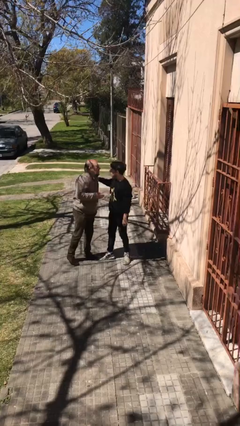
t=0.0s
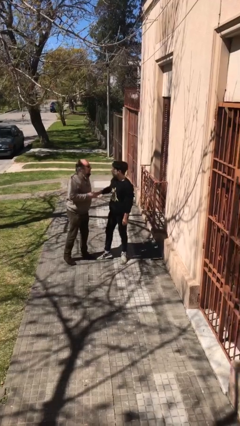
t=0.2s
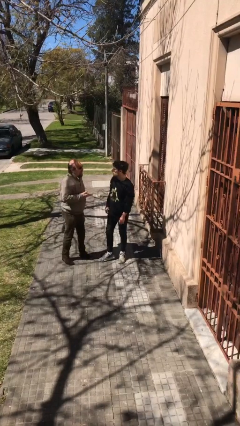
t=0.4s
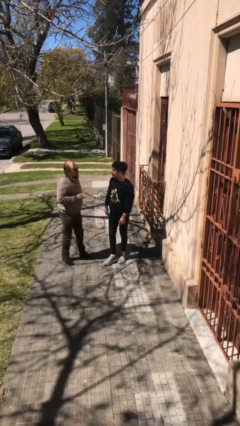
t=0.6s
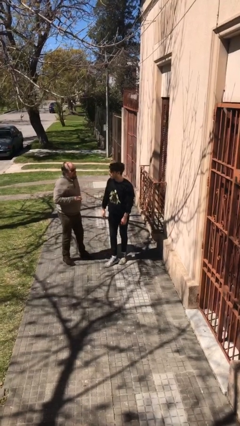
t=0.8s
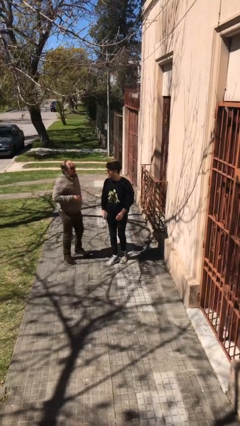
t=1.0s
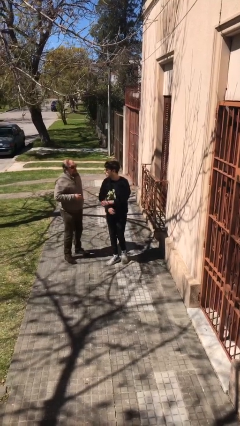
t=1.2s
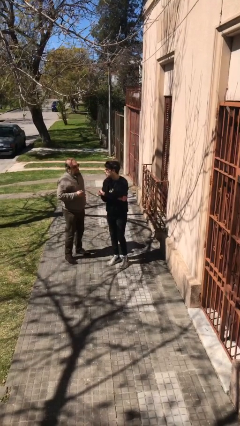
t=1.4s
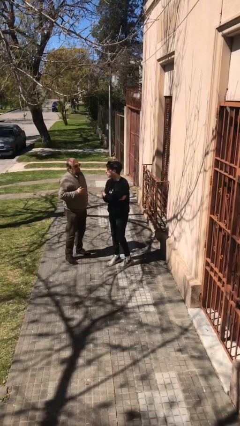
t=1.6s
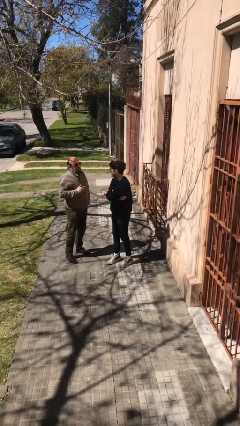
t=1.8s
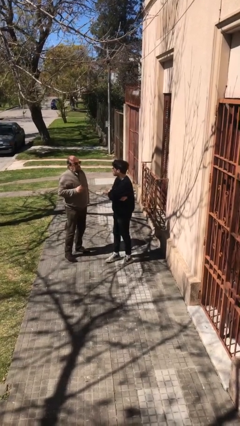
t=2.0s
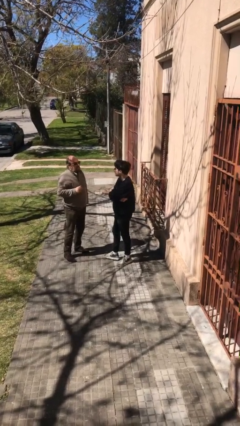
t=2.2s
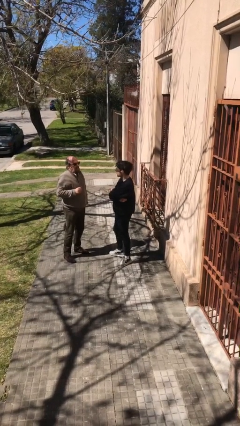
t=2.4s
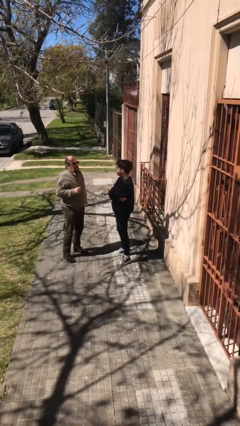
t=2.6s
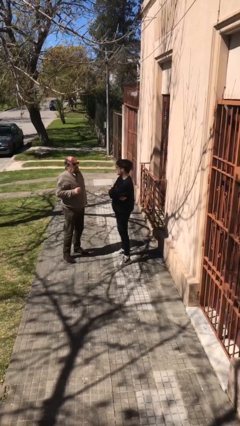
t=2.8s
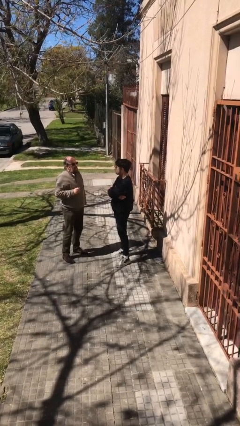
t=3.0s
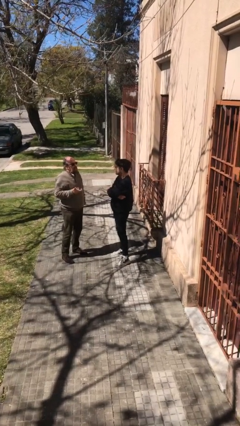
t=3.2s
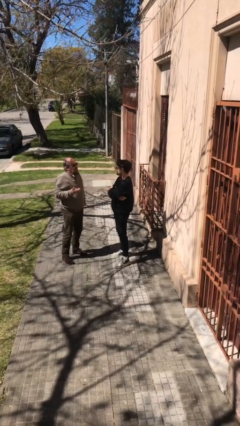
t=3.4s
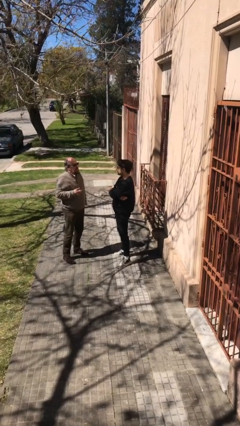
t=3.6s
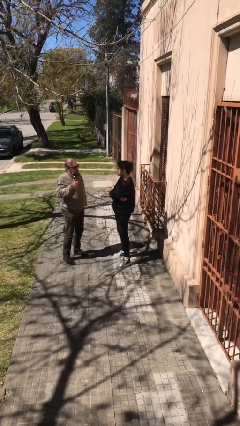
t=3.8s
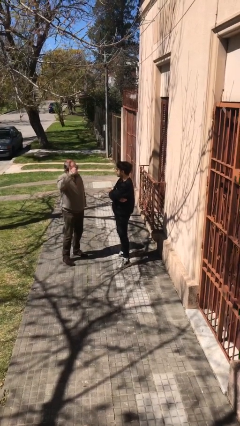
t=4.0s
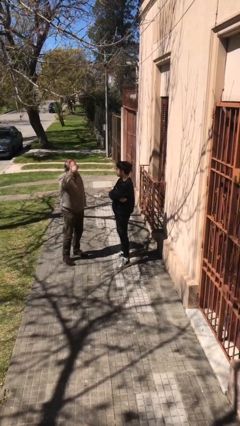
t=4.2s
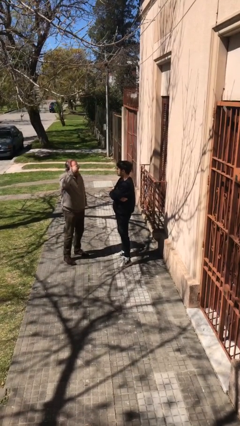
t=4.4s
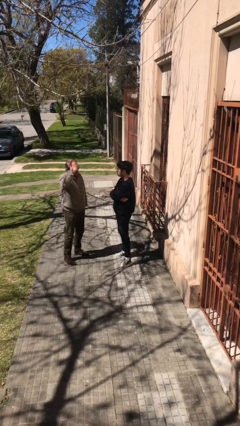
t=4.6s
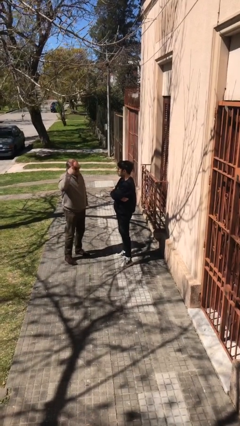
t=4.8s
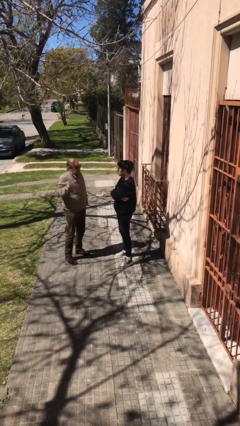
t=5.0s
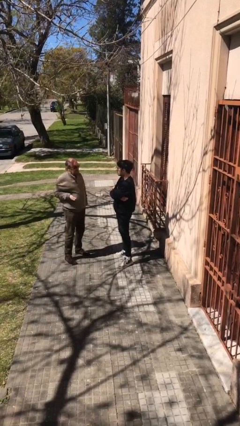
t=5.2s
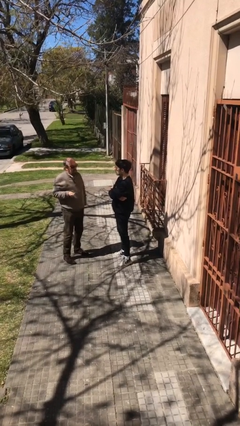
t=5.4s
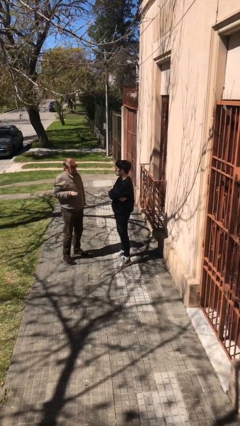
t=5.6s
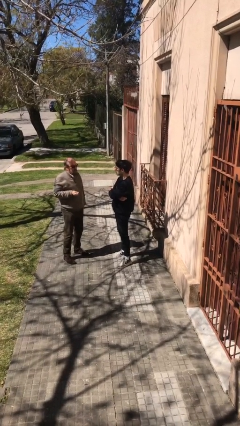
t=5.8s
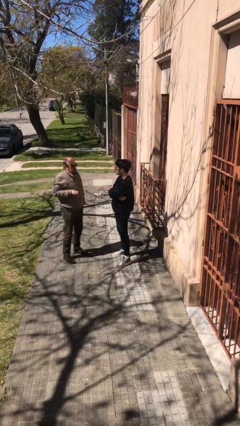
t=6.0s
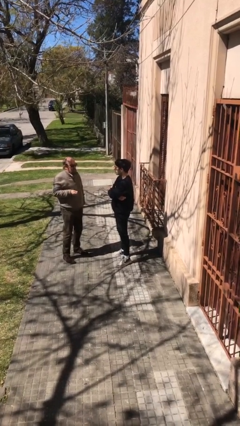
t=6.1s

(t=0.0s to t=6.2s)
person talks to person

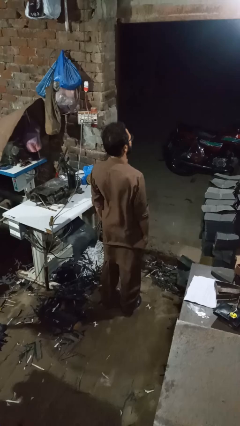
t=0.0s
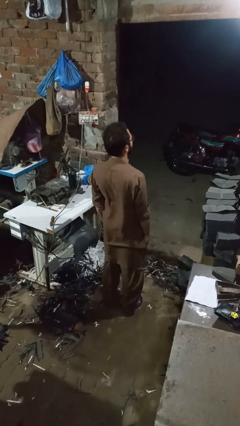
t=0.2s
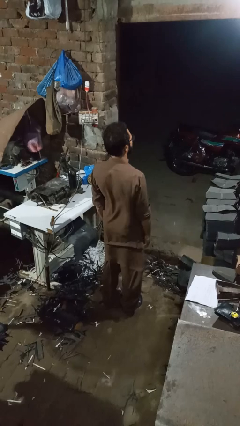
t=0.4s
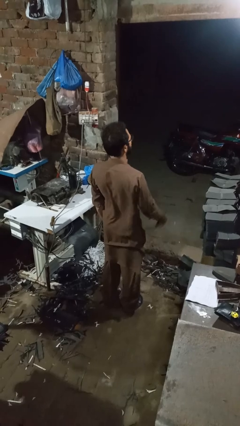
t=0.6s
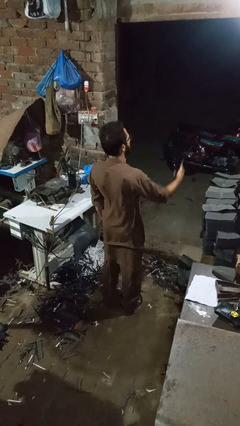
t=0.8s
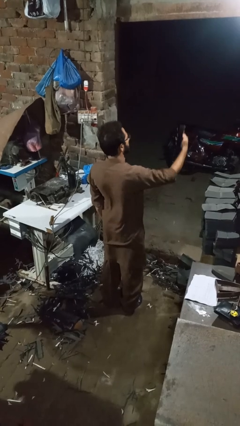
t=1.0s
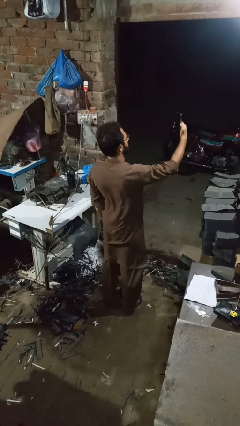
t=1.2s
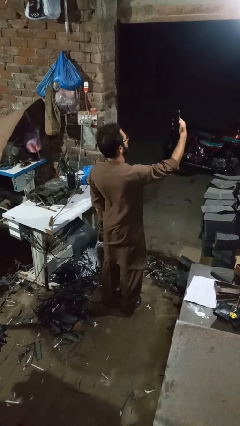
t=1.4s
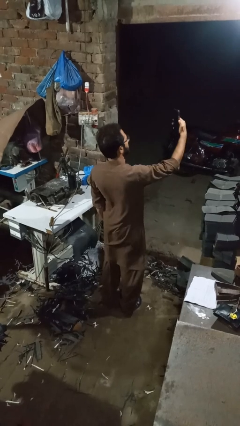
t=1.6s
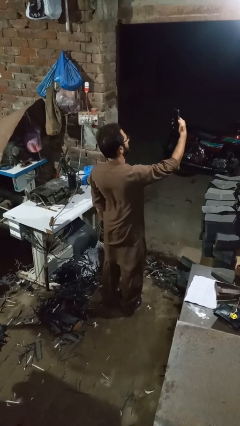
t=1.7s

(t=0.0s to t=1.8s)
person takes selfie

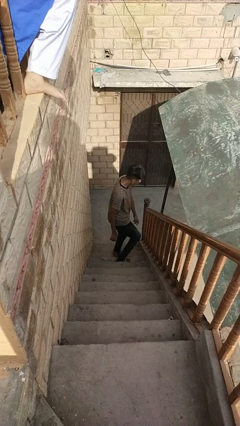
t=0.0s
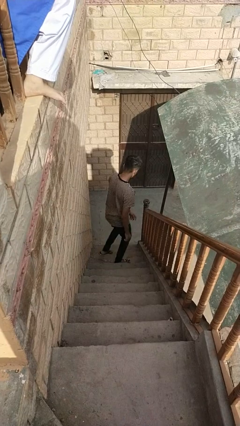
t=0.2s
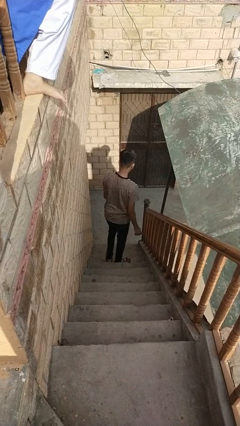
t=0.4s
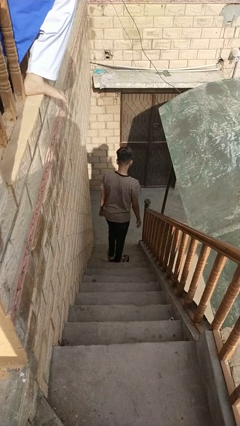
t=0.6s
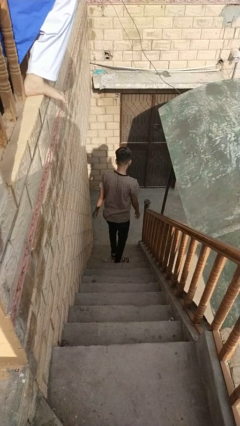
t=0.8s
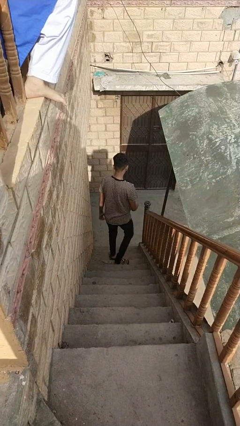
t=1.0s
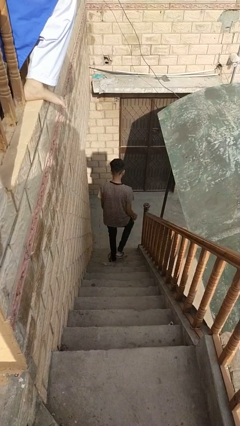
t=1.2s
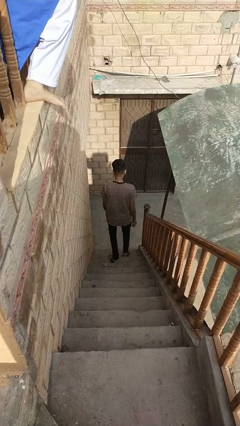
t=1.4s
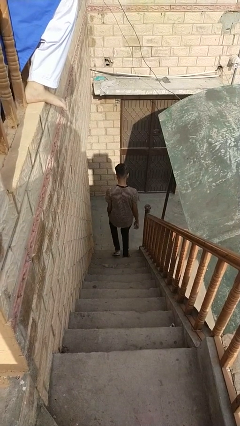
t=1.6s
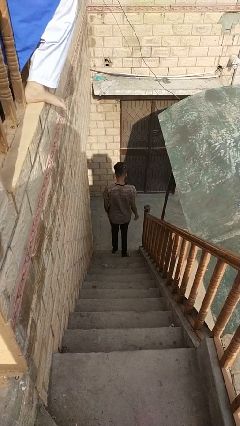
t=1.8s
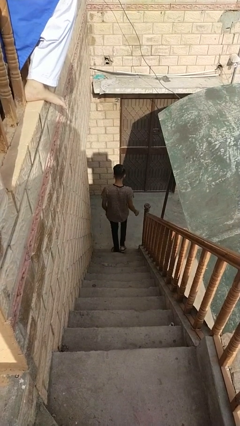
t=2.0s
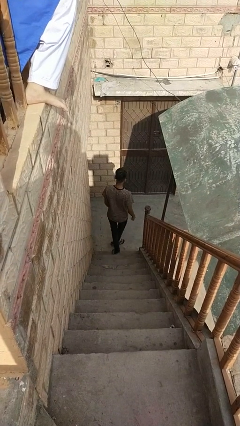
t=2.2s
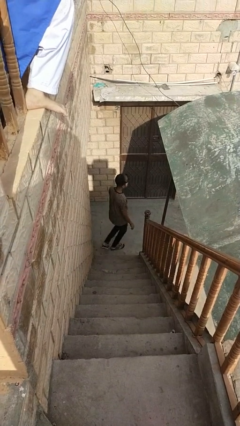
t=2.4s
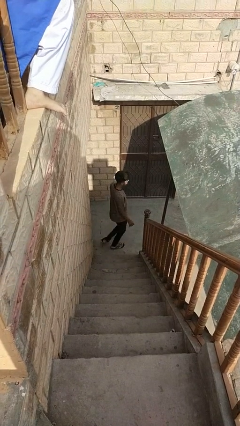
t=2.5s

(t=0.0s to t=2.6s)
person climbs down stairs

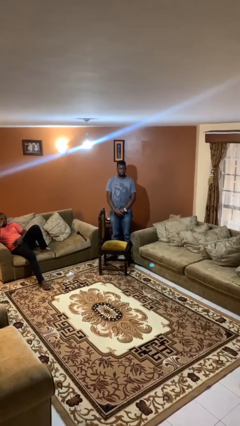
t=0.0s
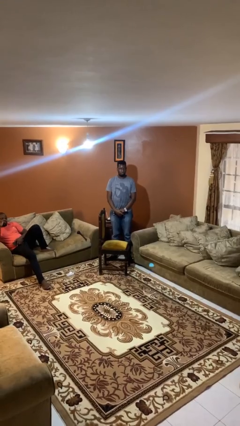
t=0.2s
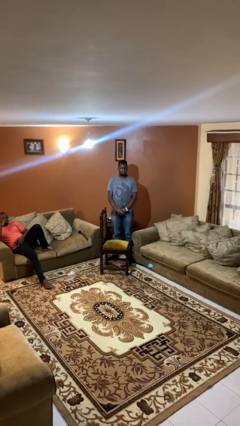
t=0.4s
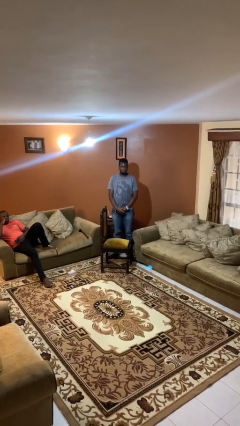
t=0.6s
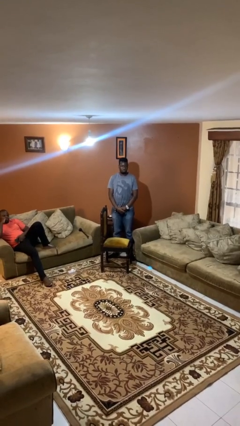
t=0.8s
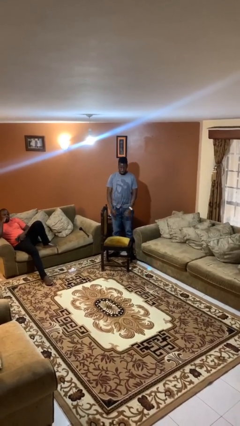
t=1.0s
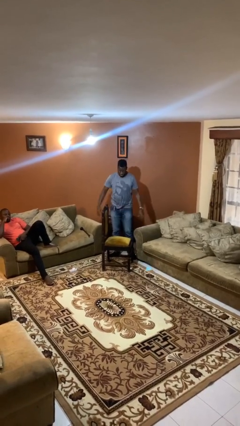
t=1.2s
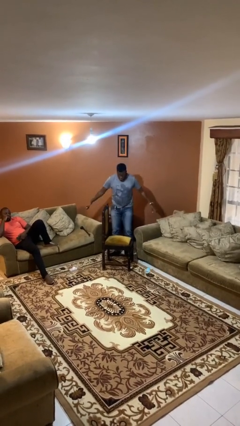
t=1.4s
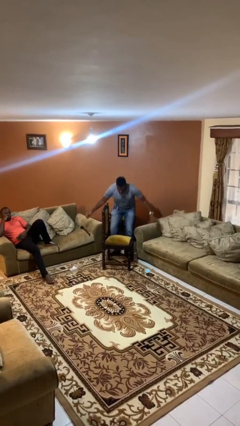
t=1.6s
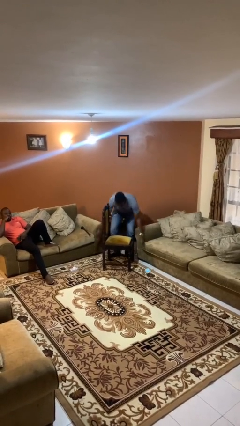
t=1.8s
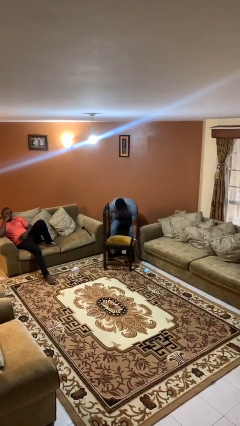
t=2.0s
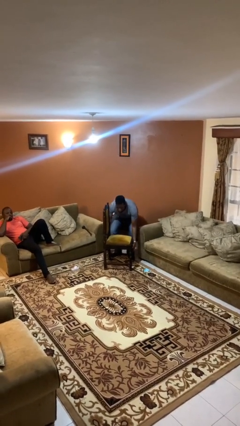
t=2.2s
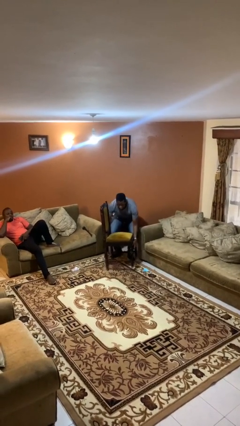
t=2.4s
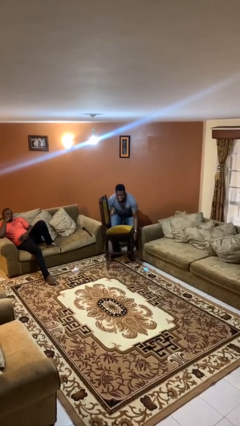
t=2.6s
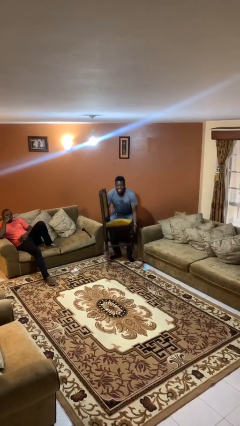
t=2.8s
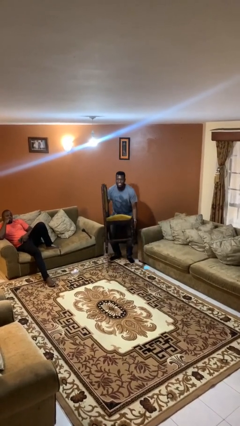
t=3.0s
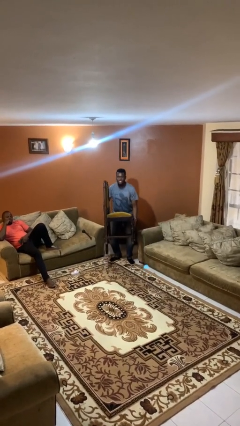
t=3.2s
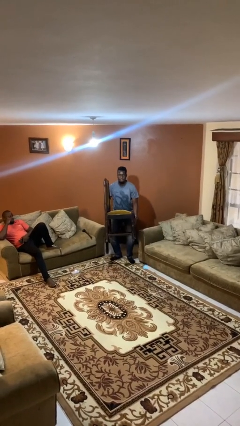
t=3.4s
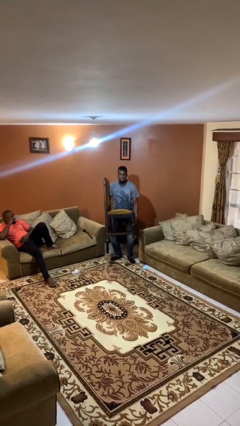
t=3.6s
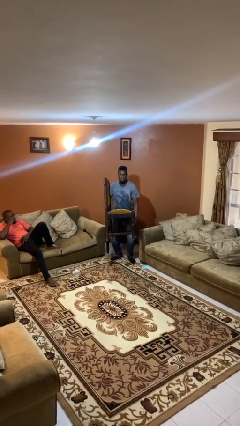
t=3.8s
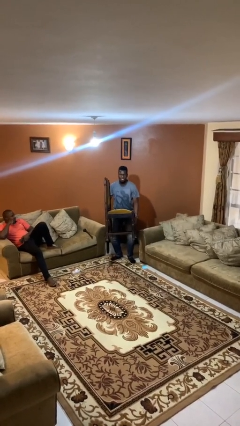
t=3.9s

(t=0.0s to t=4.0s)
person picks up object from floor

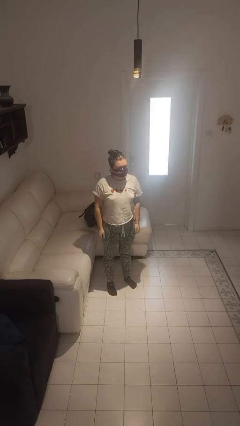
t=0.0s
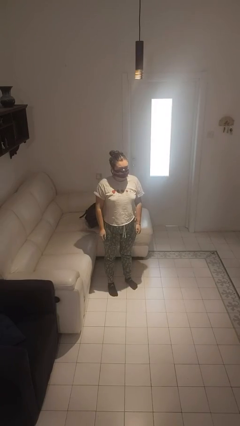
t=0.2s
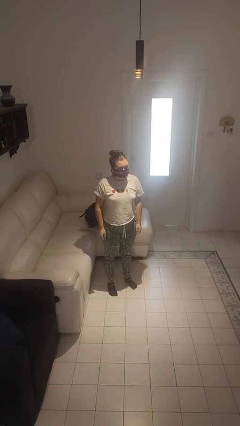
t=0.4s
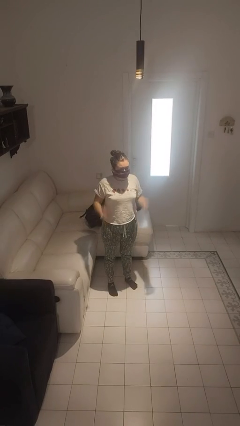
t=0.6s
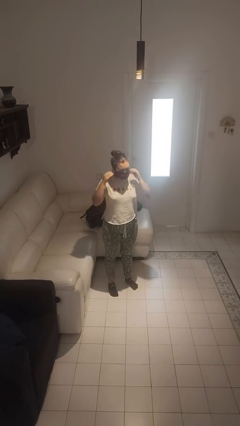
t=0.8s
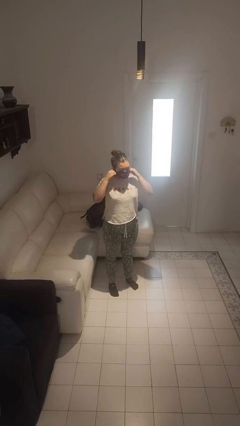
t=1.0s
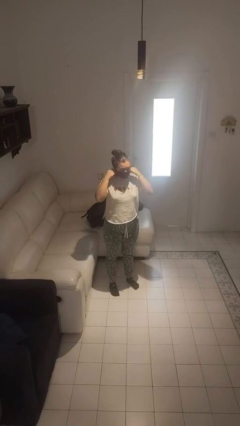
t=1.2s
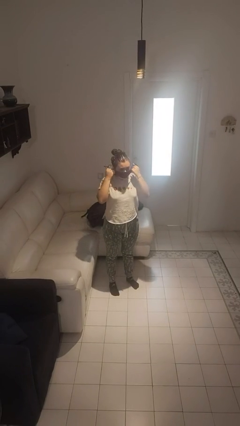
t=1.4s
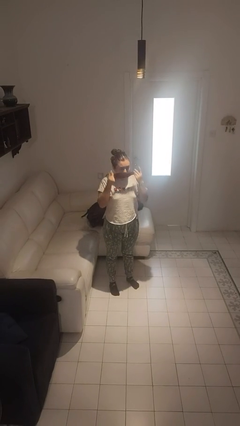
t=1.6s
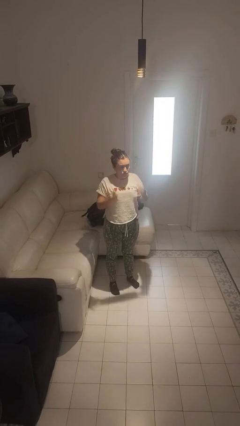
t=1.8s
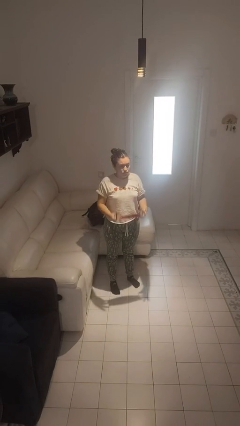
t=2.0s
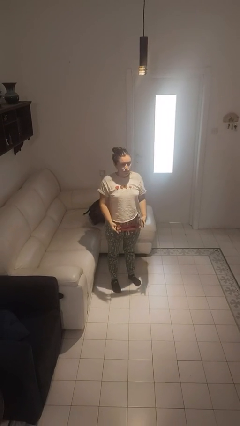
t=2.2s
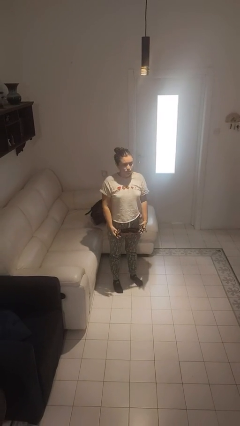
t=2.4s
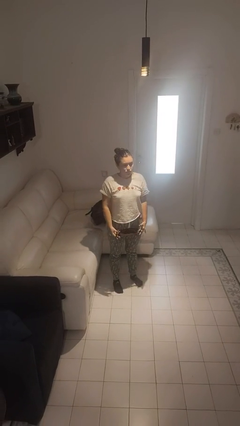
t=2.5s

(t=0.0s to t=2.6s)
person takes off facemask

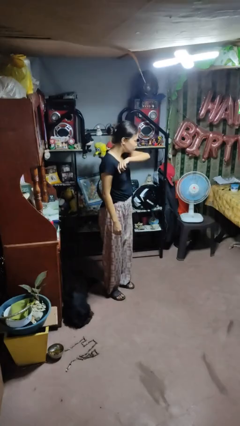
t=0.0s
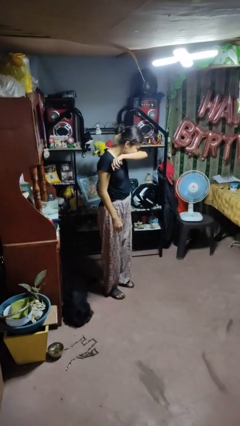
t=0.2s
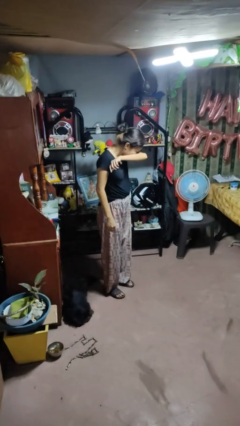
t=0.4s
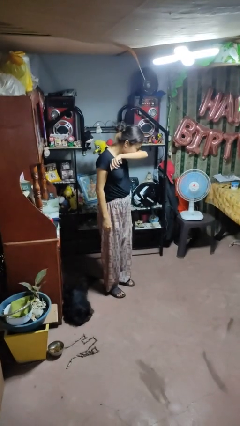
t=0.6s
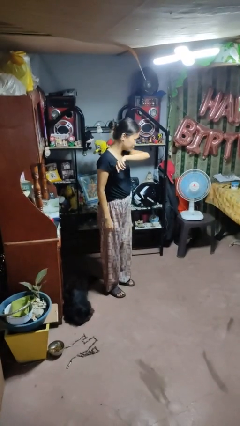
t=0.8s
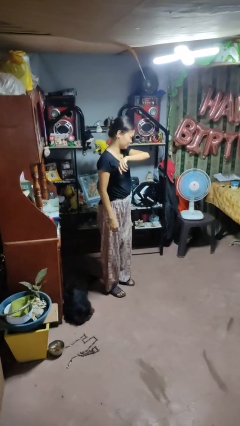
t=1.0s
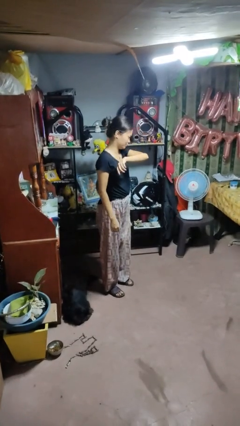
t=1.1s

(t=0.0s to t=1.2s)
person sneezes into arm
